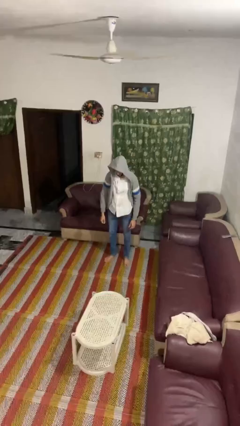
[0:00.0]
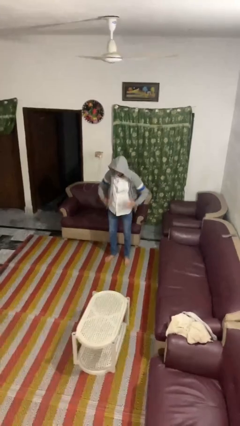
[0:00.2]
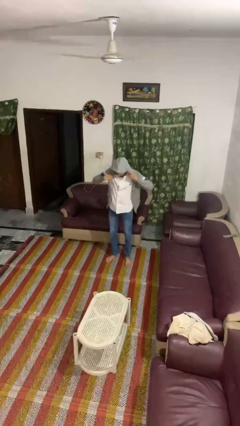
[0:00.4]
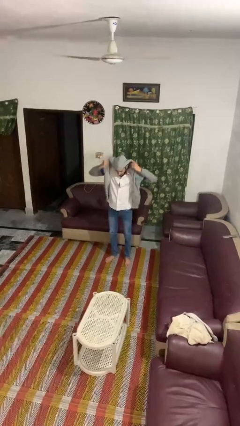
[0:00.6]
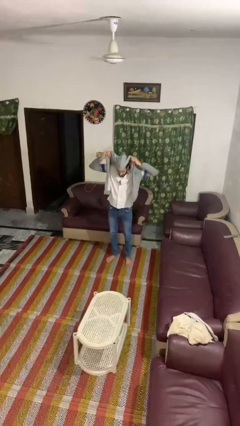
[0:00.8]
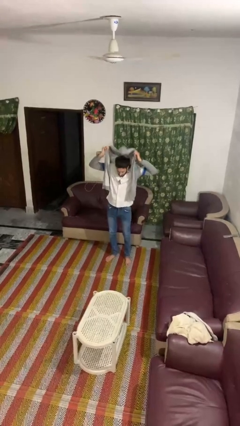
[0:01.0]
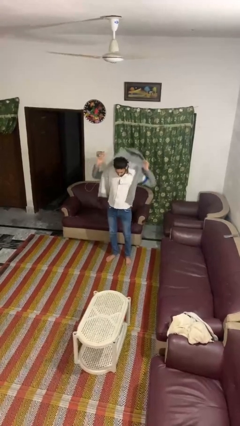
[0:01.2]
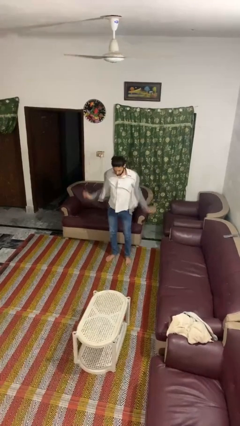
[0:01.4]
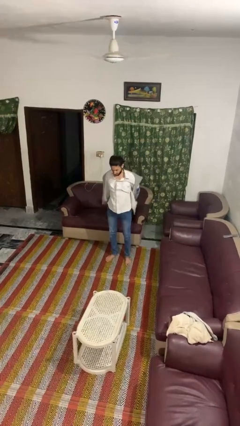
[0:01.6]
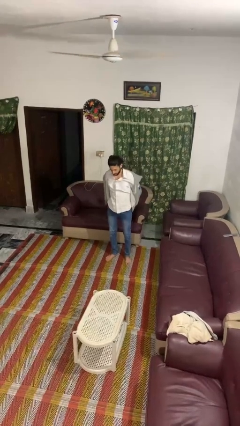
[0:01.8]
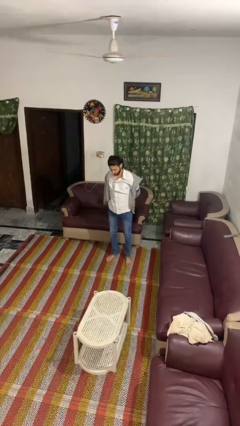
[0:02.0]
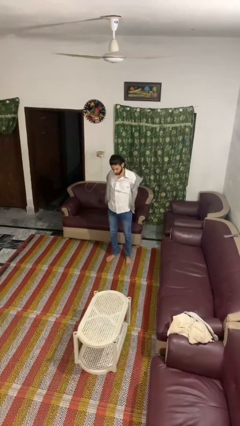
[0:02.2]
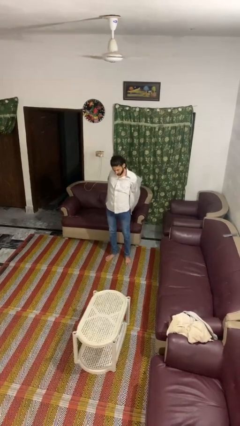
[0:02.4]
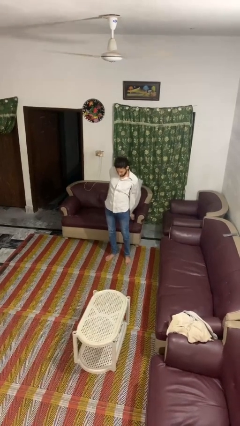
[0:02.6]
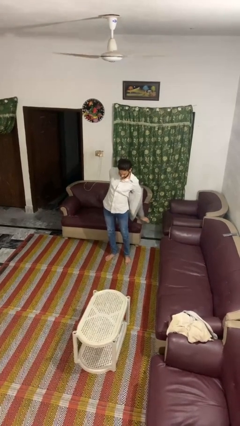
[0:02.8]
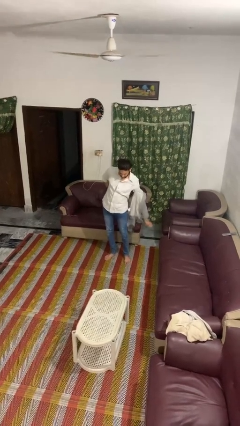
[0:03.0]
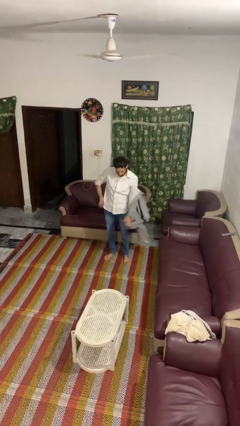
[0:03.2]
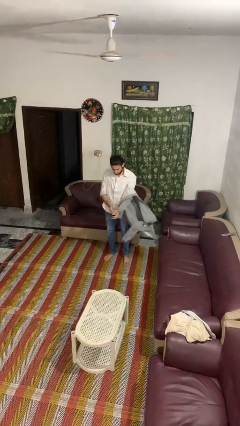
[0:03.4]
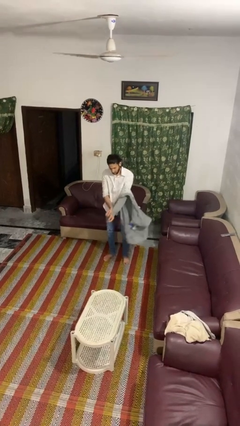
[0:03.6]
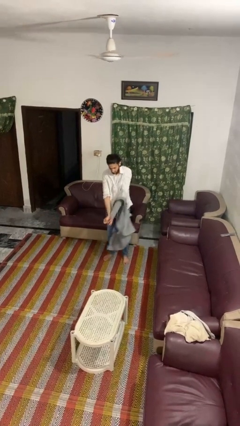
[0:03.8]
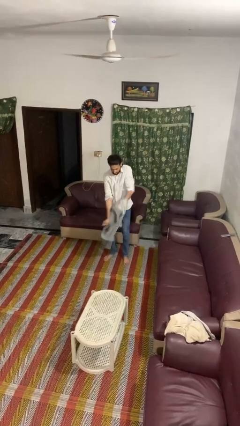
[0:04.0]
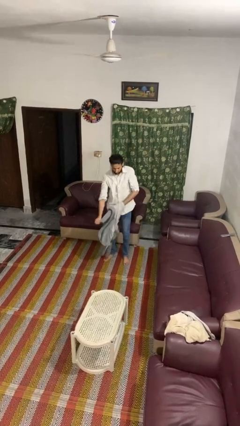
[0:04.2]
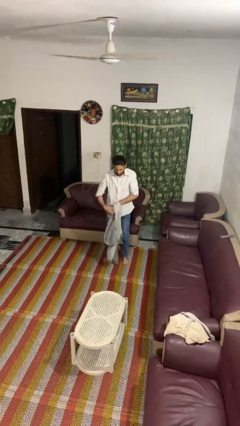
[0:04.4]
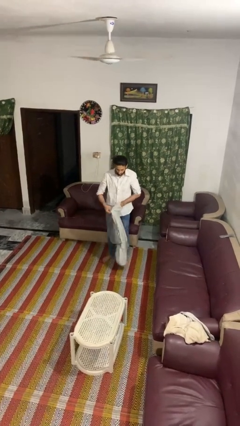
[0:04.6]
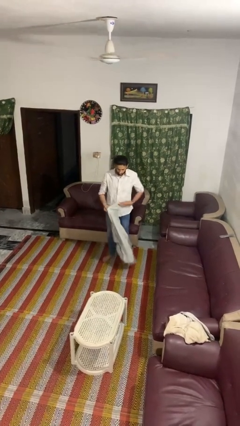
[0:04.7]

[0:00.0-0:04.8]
person takes off hoodie

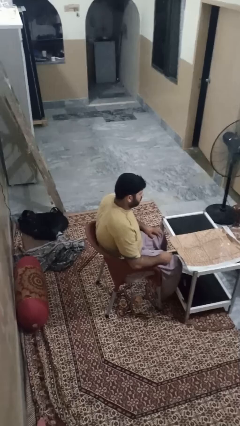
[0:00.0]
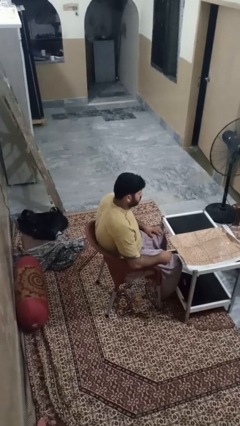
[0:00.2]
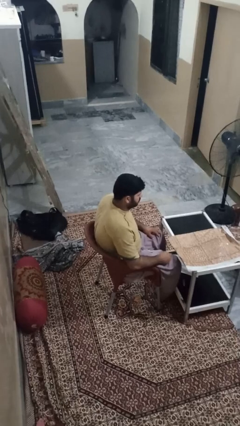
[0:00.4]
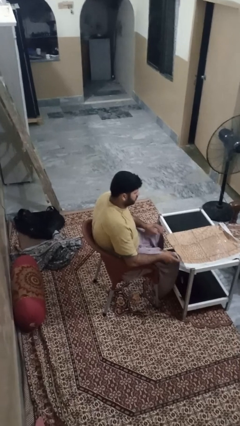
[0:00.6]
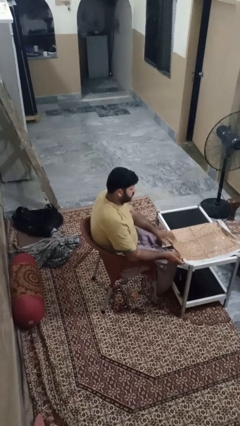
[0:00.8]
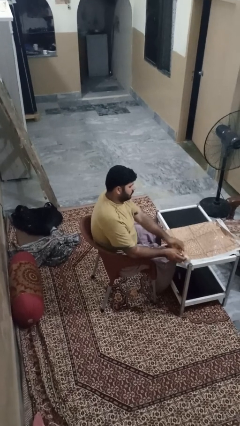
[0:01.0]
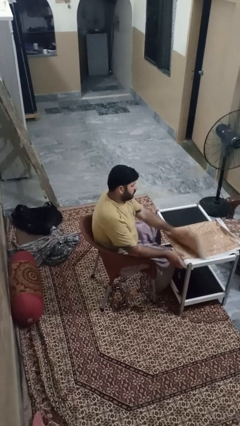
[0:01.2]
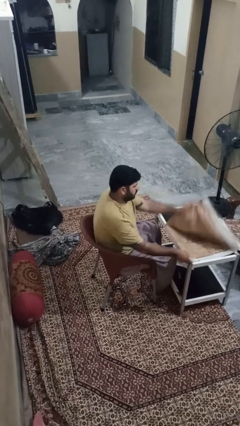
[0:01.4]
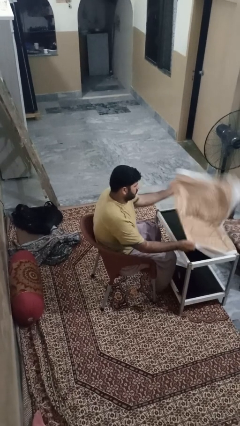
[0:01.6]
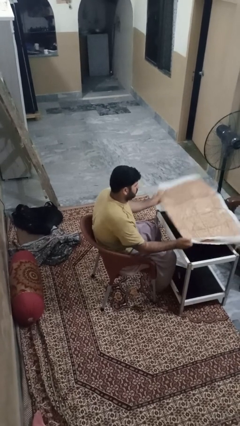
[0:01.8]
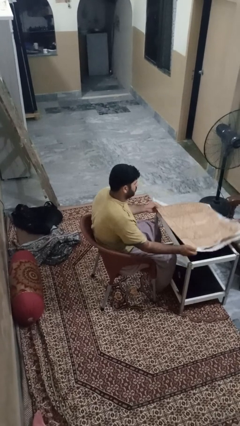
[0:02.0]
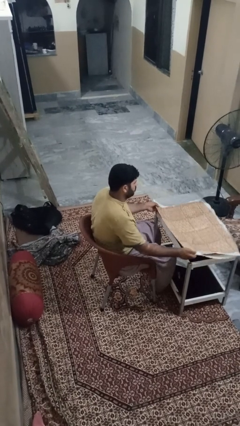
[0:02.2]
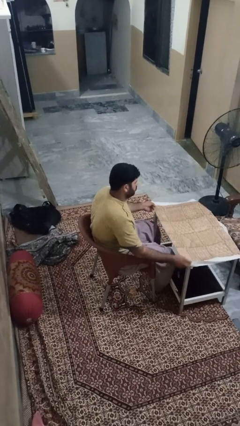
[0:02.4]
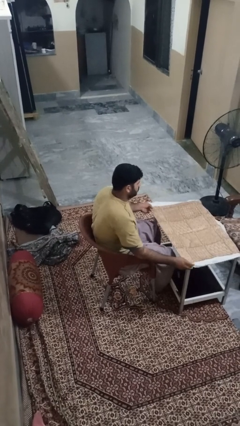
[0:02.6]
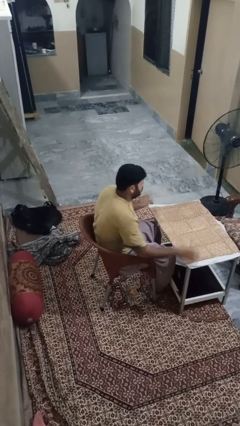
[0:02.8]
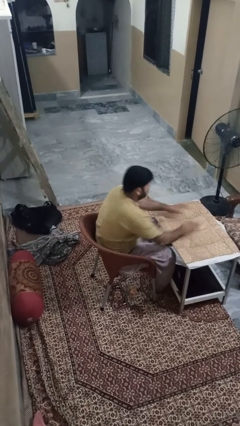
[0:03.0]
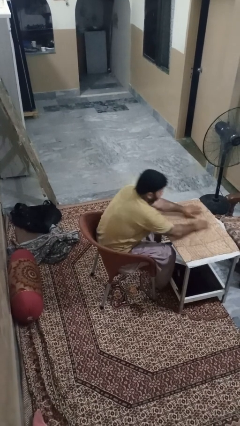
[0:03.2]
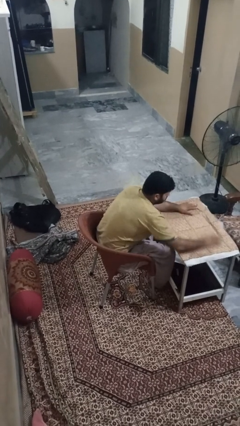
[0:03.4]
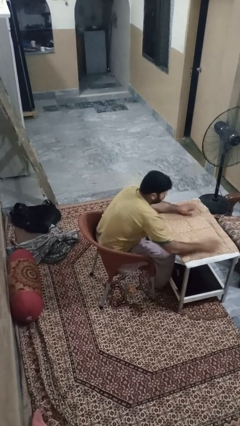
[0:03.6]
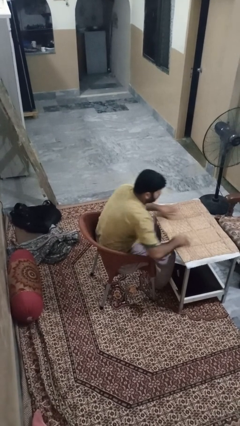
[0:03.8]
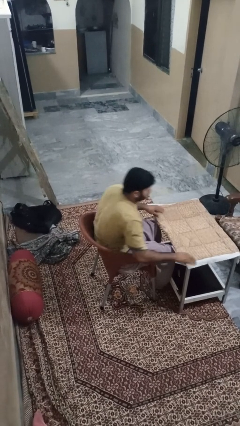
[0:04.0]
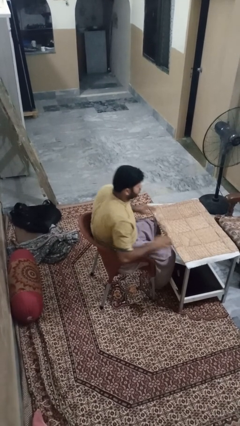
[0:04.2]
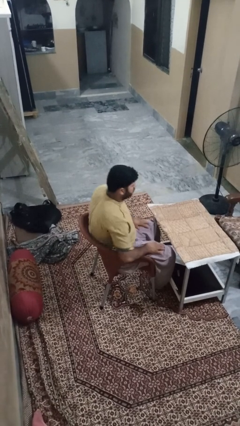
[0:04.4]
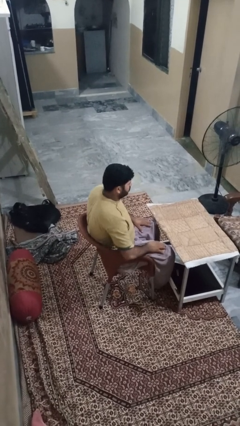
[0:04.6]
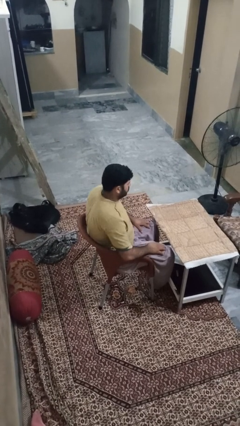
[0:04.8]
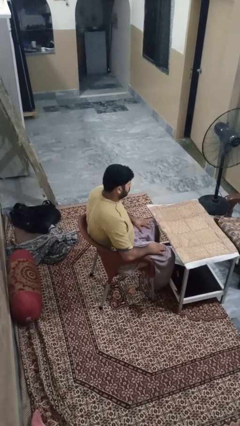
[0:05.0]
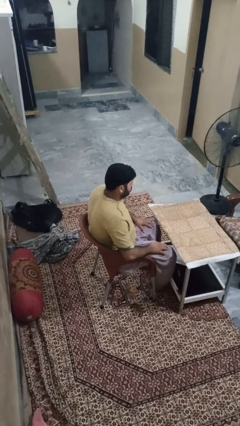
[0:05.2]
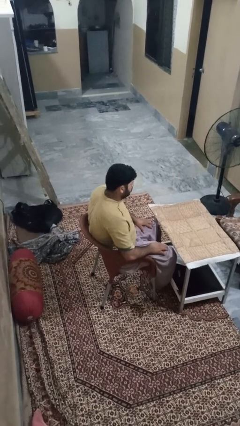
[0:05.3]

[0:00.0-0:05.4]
person spreads tablecloth

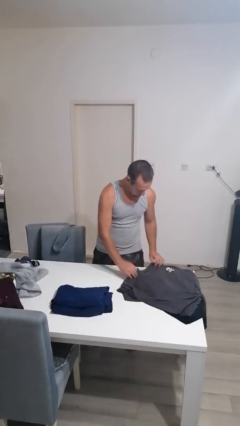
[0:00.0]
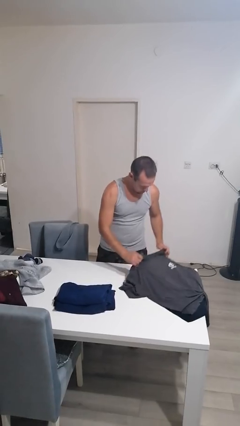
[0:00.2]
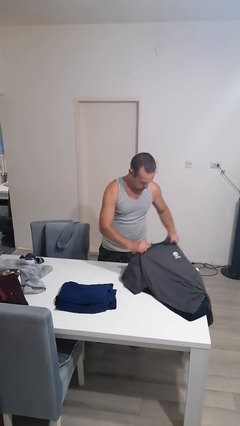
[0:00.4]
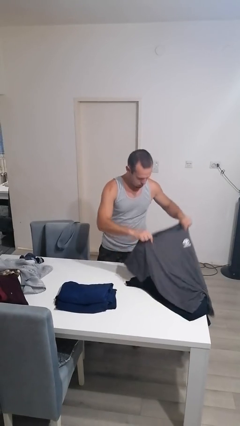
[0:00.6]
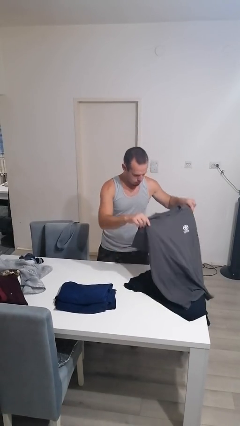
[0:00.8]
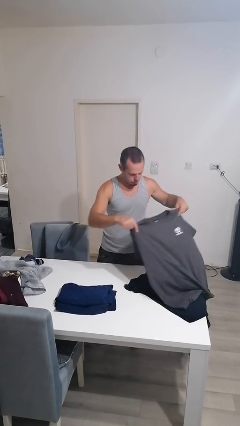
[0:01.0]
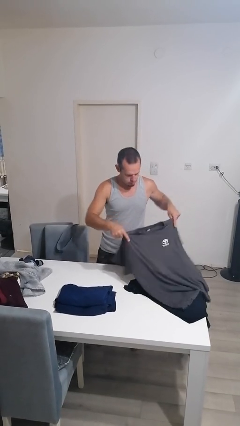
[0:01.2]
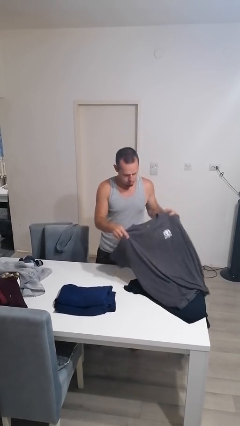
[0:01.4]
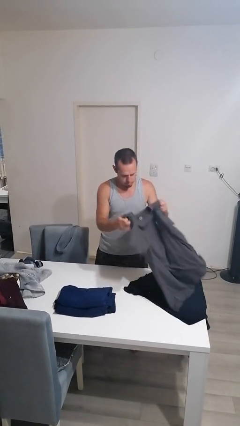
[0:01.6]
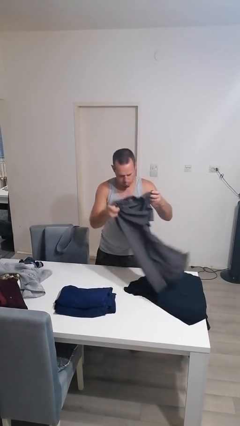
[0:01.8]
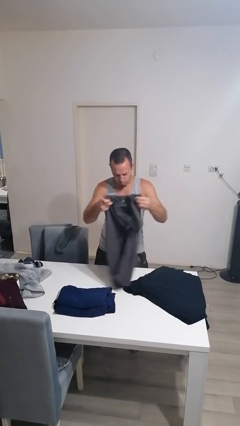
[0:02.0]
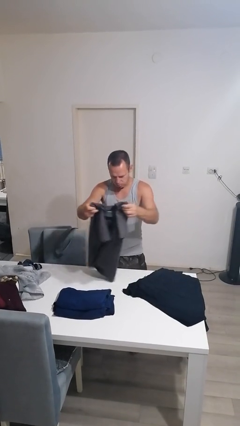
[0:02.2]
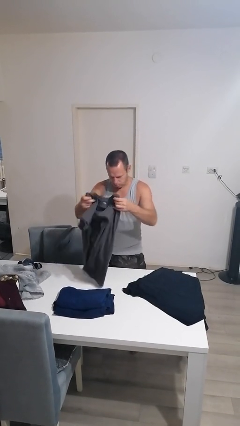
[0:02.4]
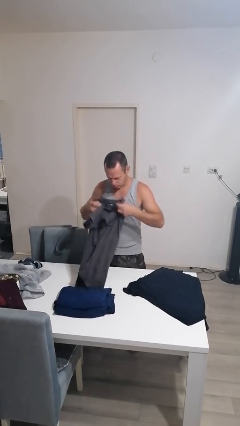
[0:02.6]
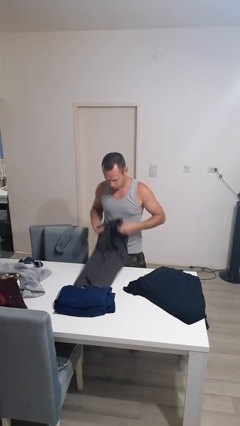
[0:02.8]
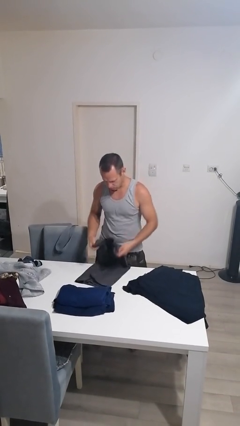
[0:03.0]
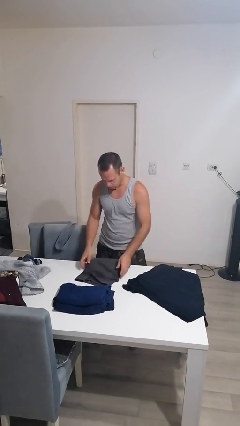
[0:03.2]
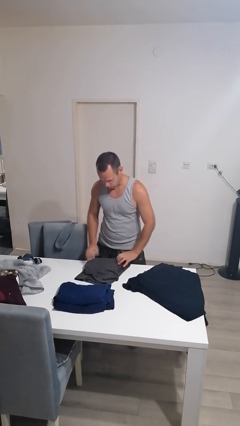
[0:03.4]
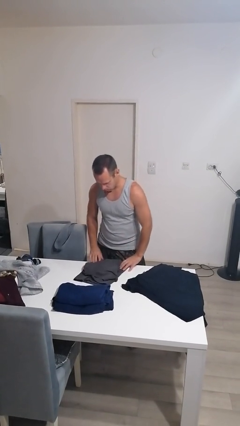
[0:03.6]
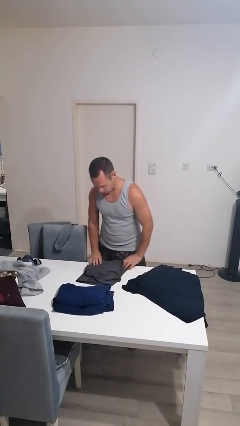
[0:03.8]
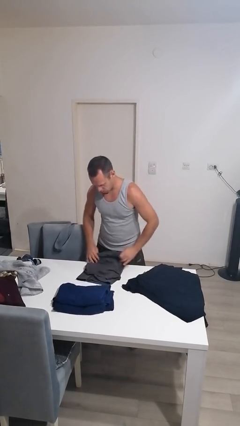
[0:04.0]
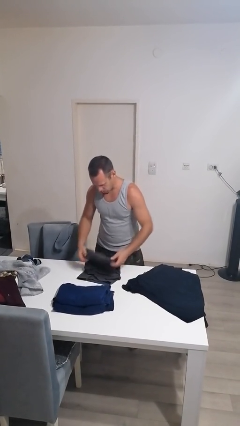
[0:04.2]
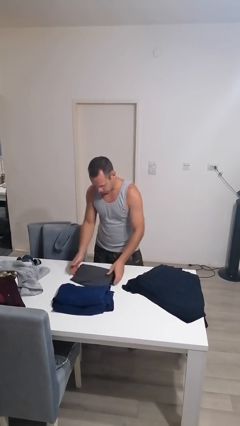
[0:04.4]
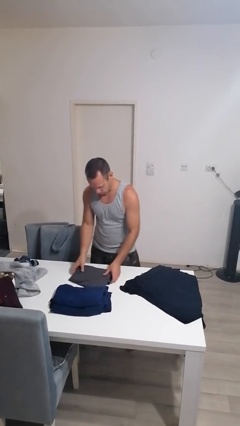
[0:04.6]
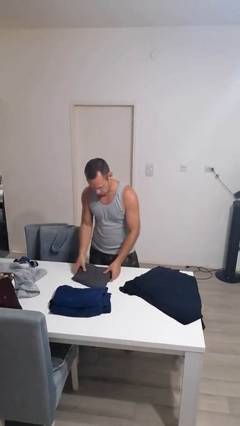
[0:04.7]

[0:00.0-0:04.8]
person folds shirt

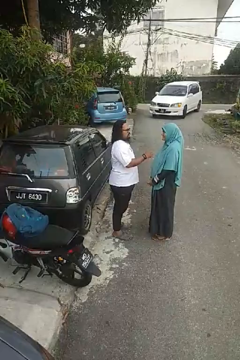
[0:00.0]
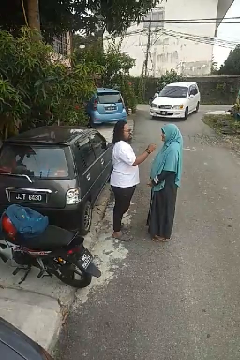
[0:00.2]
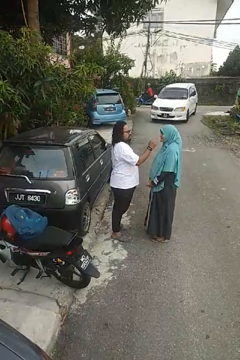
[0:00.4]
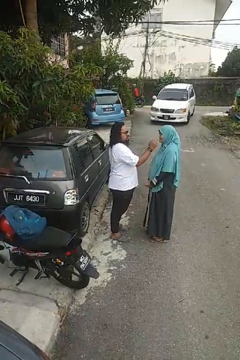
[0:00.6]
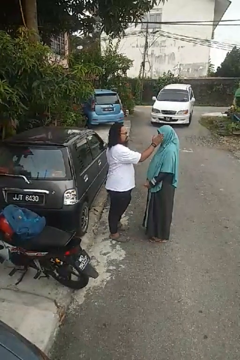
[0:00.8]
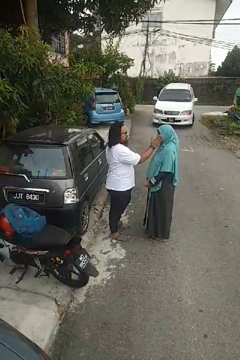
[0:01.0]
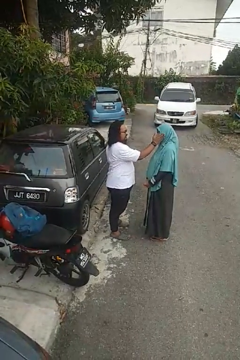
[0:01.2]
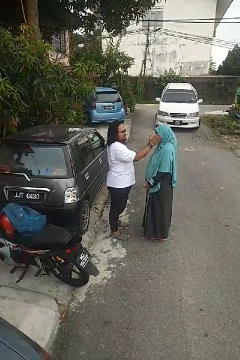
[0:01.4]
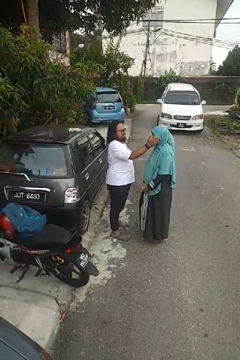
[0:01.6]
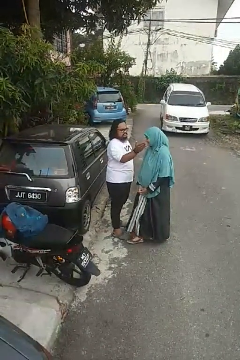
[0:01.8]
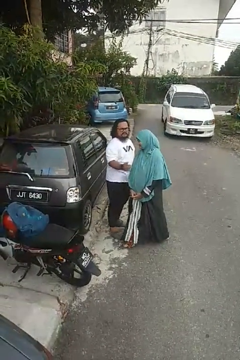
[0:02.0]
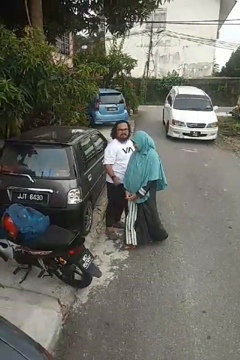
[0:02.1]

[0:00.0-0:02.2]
person touches face of person

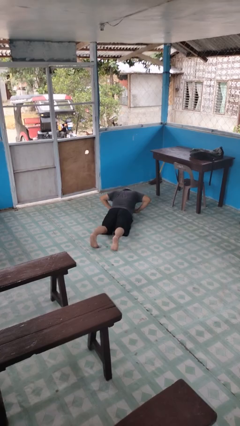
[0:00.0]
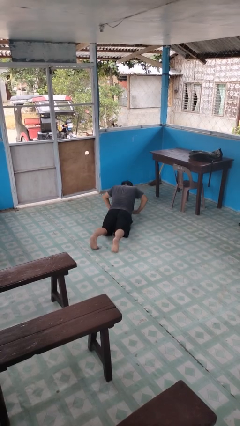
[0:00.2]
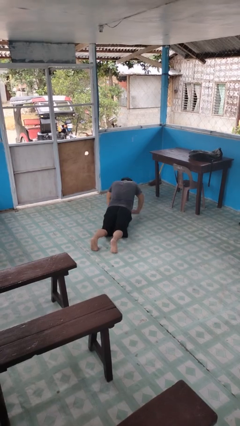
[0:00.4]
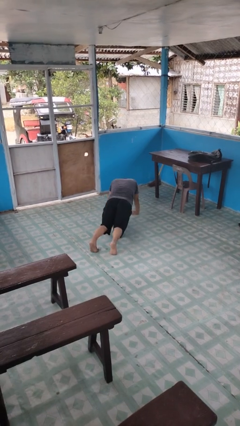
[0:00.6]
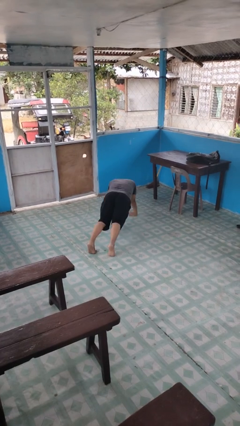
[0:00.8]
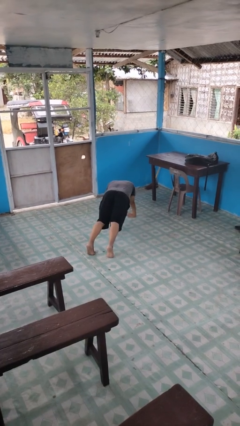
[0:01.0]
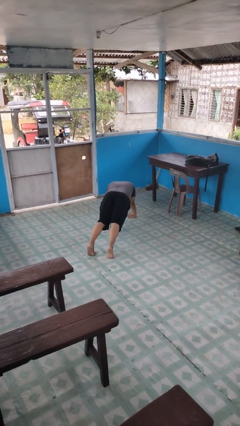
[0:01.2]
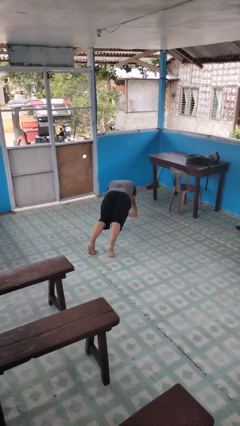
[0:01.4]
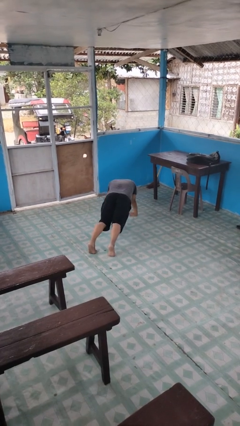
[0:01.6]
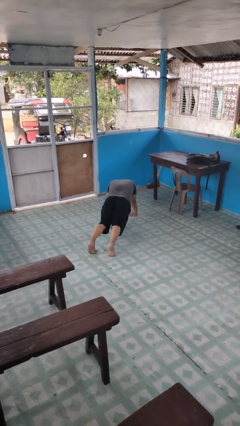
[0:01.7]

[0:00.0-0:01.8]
person exercises with pushup
